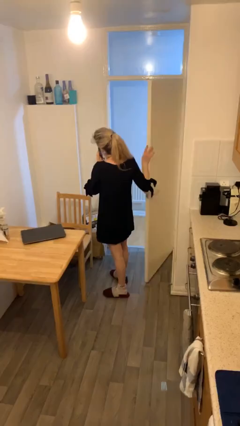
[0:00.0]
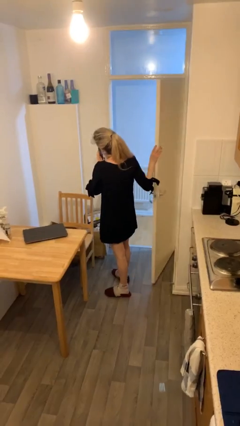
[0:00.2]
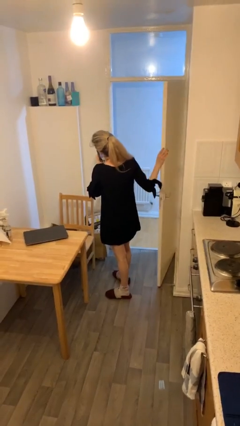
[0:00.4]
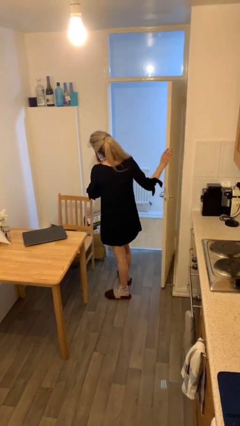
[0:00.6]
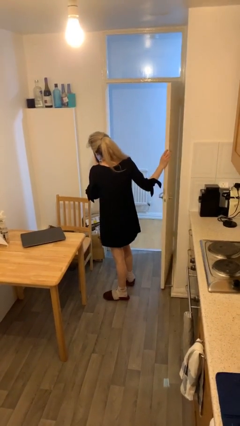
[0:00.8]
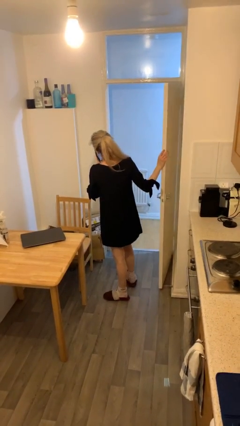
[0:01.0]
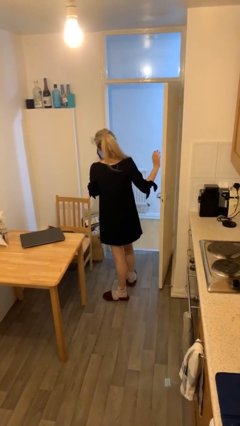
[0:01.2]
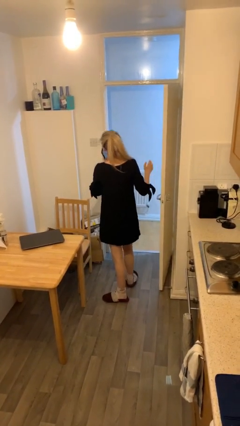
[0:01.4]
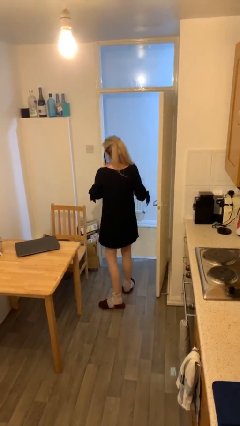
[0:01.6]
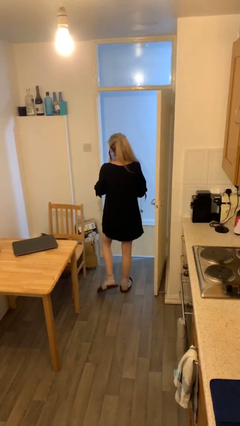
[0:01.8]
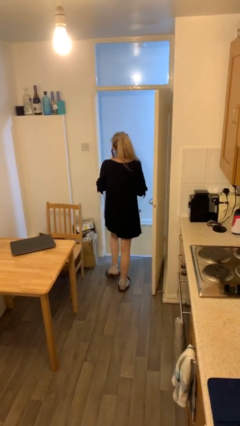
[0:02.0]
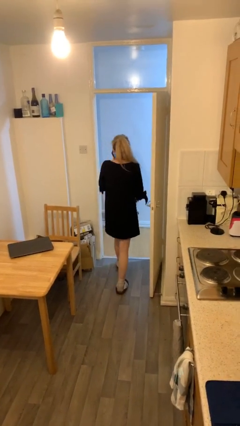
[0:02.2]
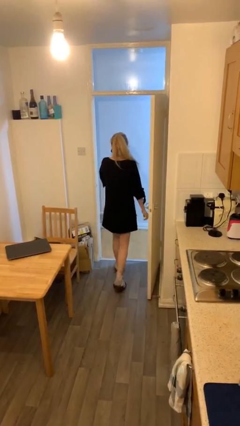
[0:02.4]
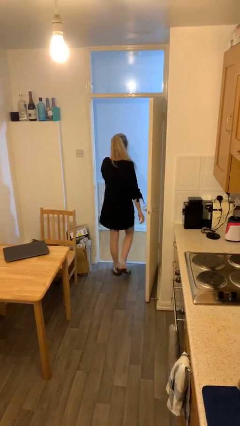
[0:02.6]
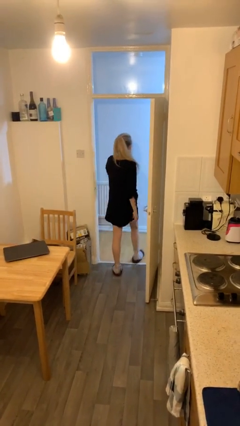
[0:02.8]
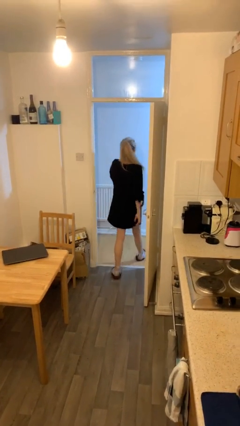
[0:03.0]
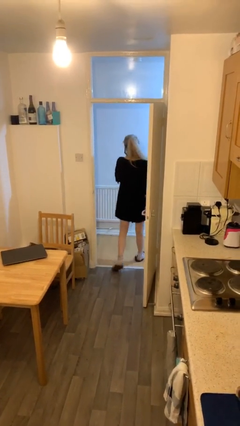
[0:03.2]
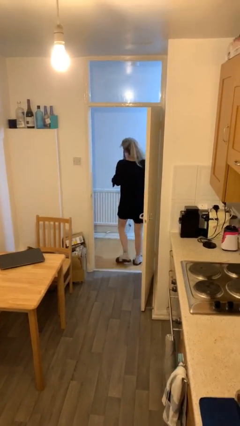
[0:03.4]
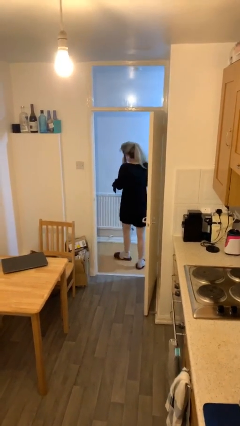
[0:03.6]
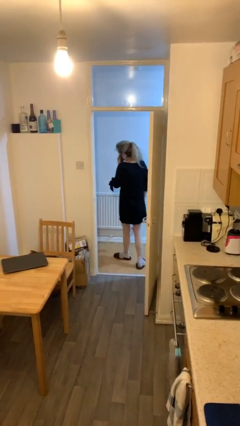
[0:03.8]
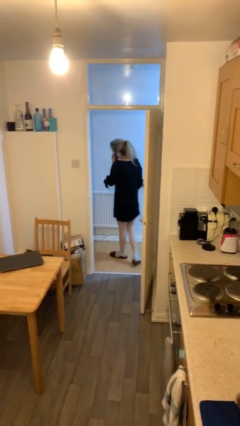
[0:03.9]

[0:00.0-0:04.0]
person exits scene through structure

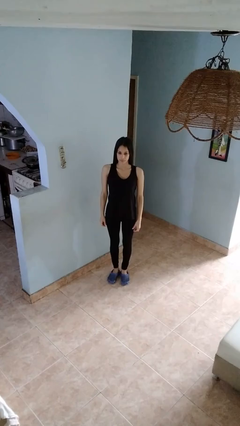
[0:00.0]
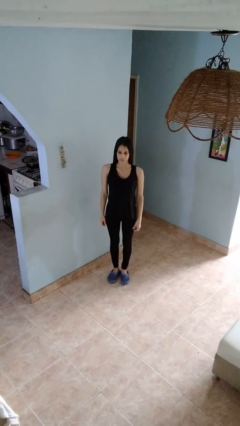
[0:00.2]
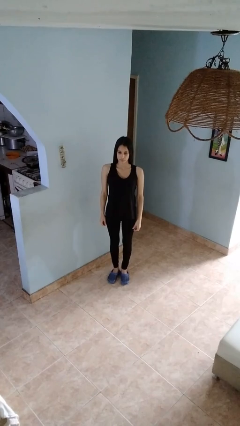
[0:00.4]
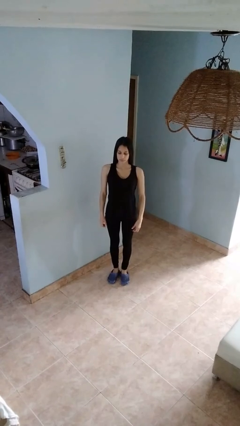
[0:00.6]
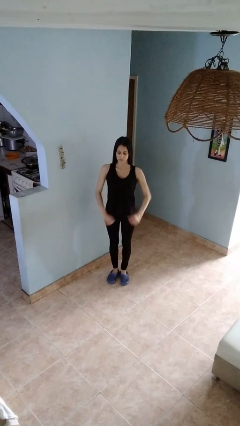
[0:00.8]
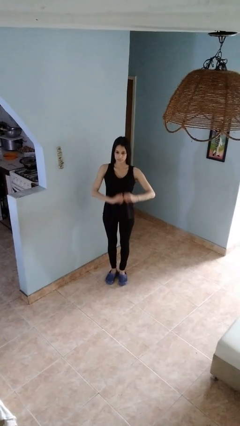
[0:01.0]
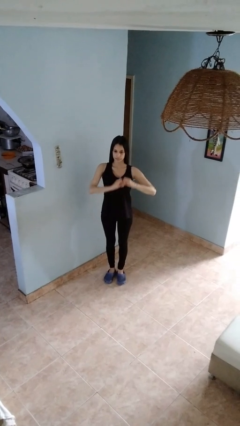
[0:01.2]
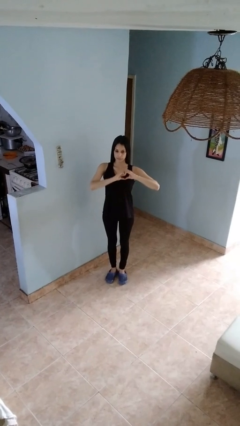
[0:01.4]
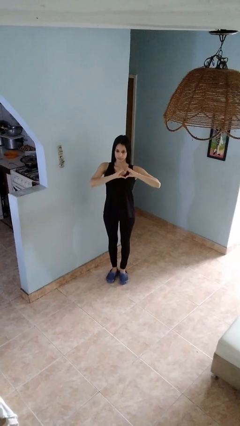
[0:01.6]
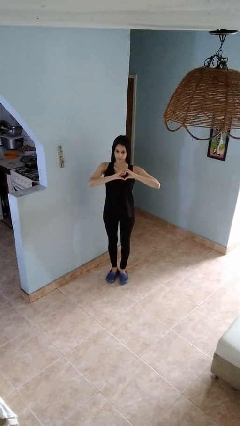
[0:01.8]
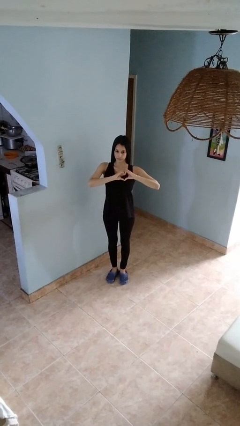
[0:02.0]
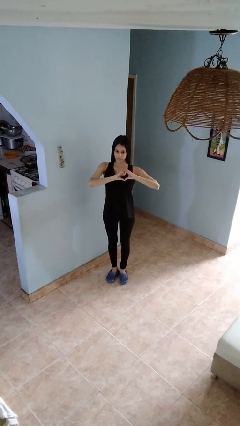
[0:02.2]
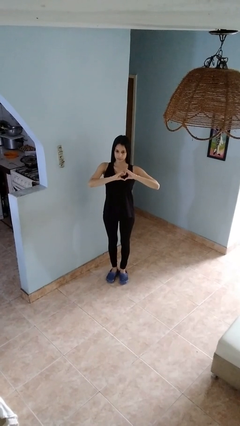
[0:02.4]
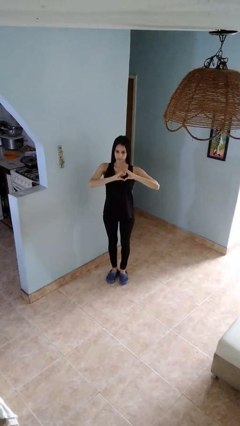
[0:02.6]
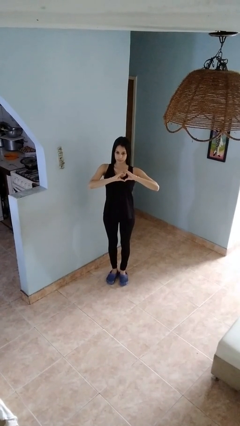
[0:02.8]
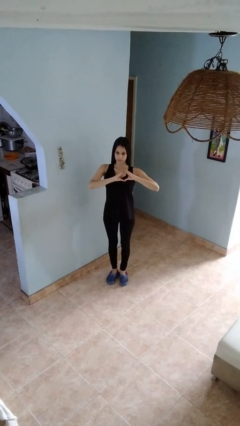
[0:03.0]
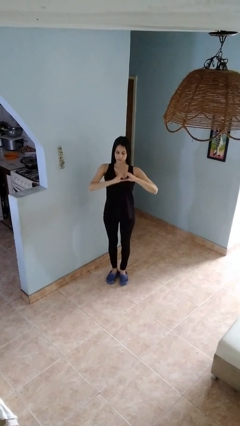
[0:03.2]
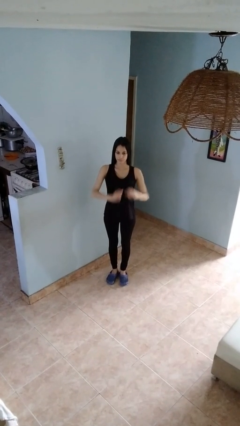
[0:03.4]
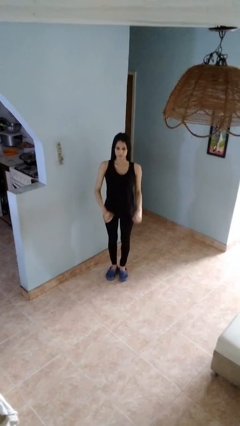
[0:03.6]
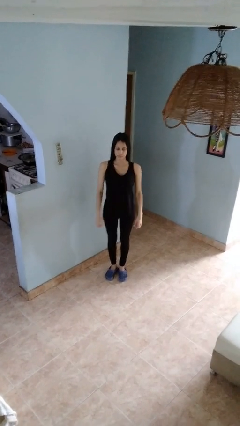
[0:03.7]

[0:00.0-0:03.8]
person gestures heart

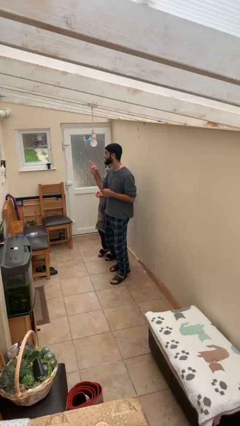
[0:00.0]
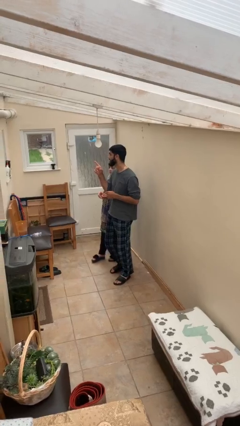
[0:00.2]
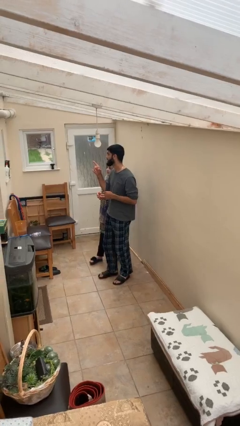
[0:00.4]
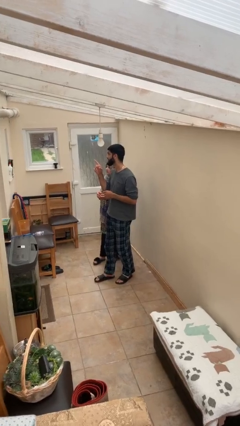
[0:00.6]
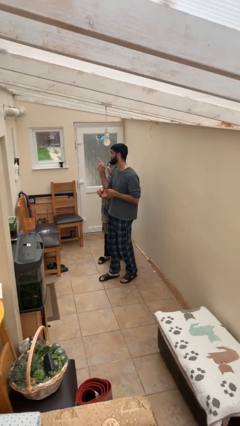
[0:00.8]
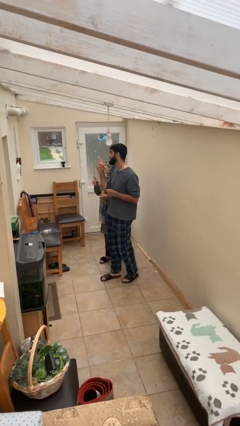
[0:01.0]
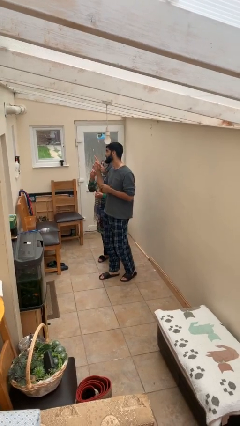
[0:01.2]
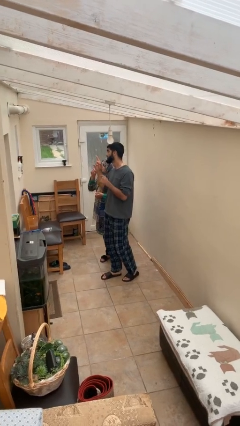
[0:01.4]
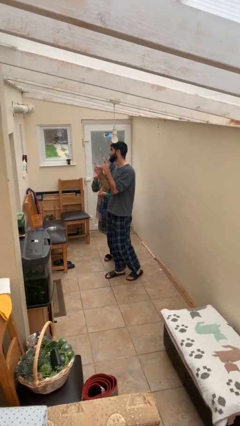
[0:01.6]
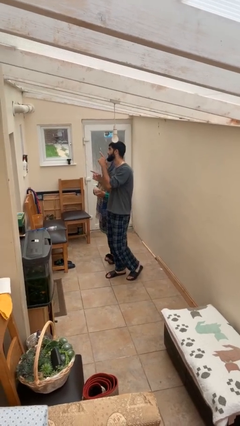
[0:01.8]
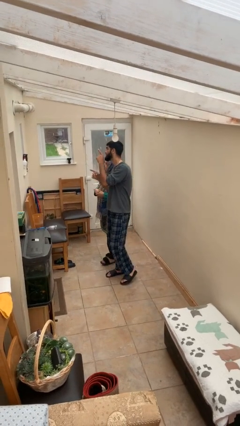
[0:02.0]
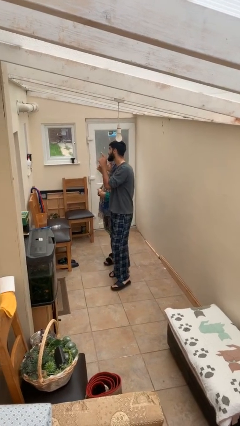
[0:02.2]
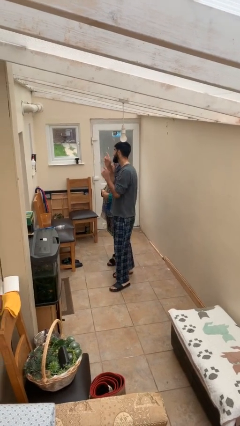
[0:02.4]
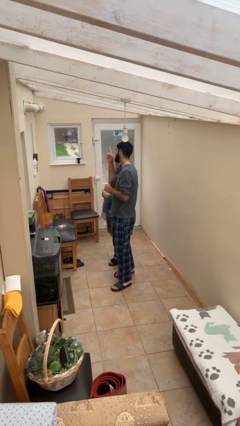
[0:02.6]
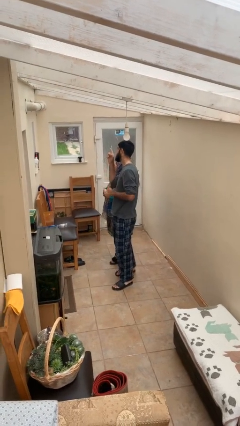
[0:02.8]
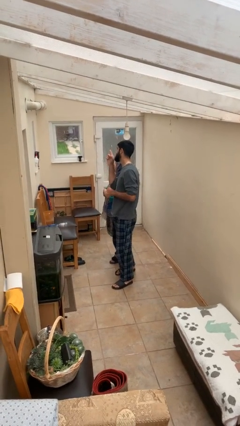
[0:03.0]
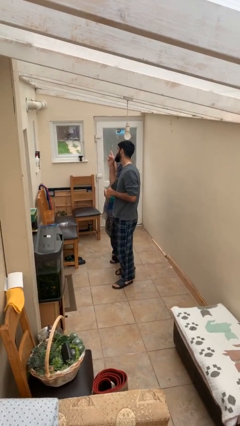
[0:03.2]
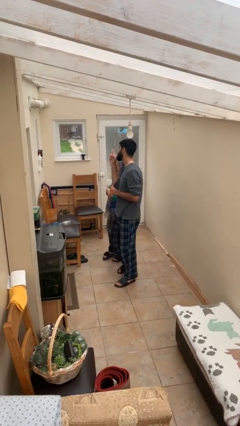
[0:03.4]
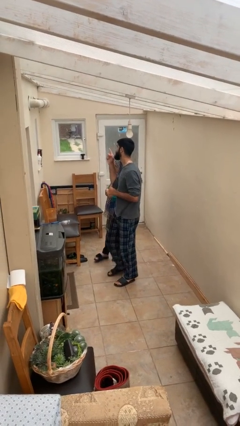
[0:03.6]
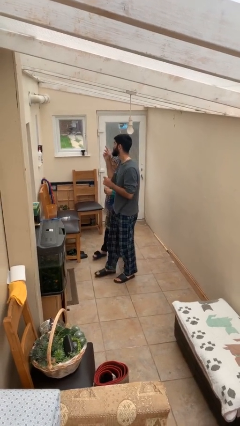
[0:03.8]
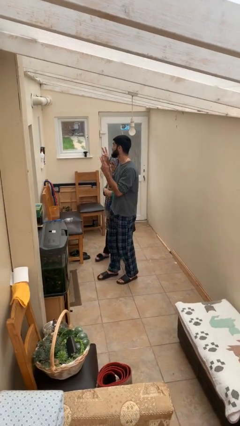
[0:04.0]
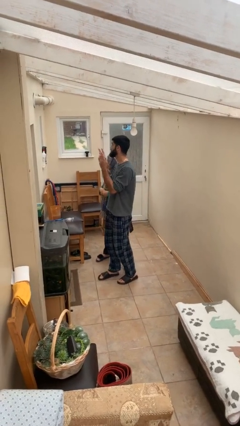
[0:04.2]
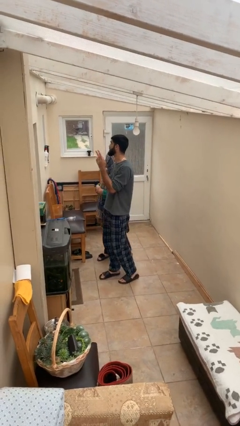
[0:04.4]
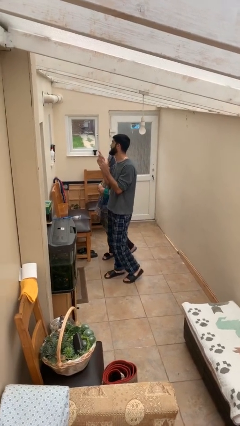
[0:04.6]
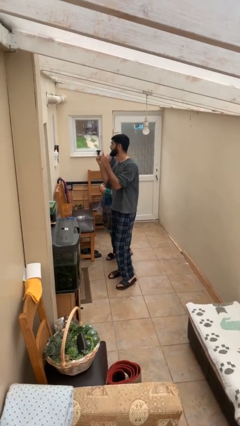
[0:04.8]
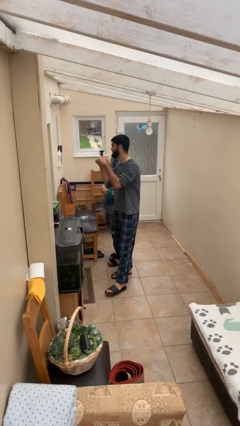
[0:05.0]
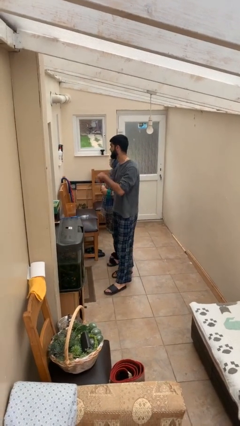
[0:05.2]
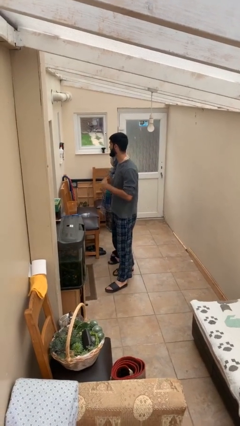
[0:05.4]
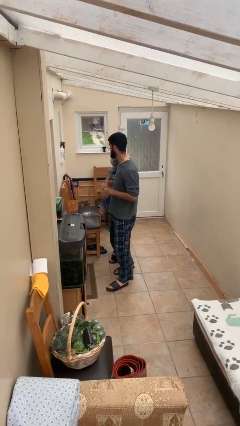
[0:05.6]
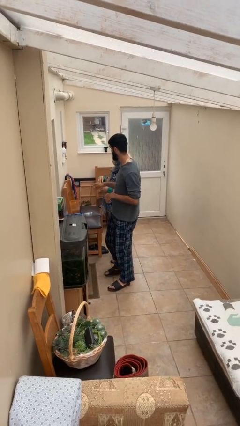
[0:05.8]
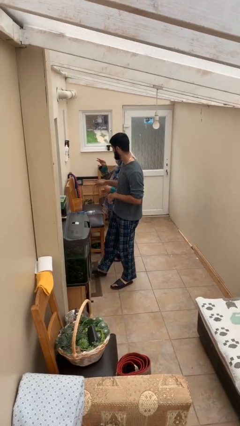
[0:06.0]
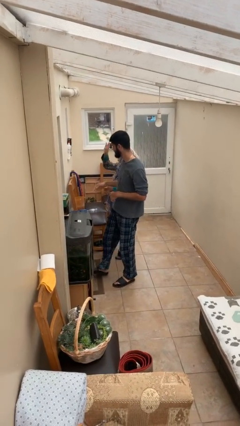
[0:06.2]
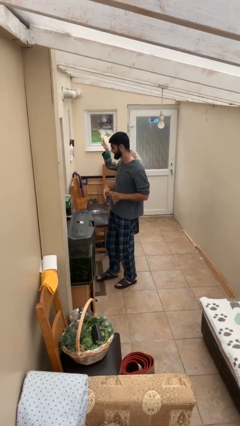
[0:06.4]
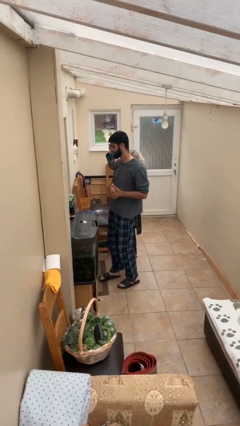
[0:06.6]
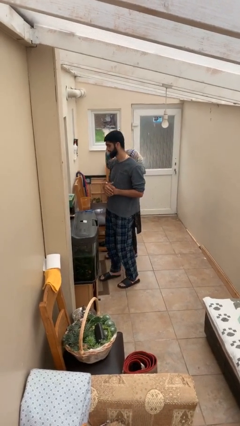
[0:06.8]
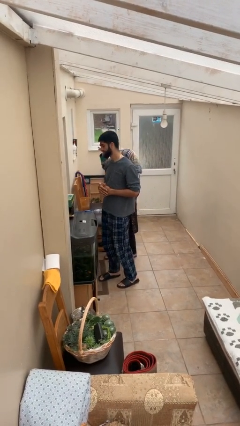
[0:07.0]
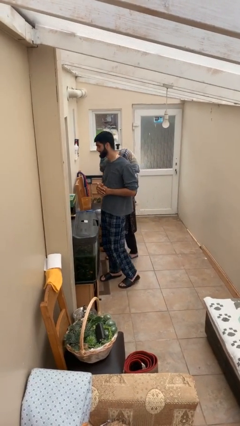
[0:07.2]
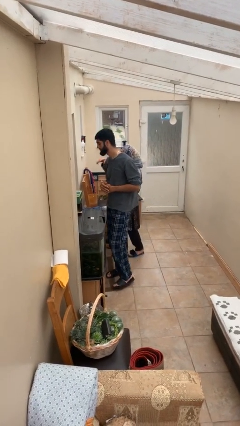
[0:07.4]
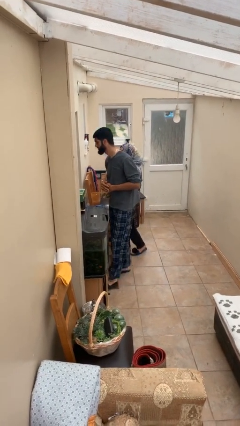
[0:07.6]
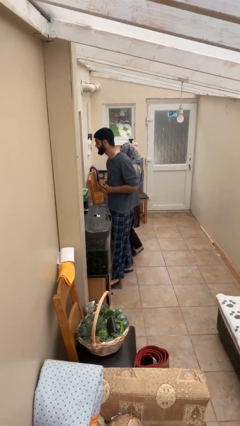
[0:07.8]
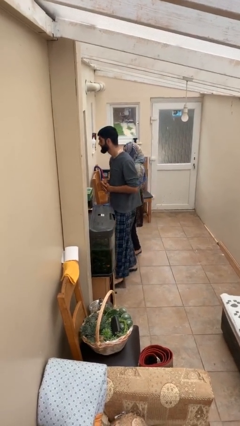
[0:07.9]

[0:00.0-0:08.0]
person talks to person

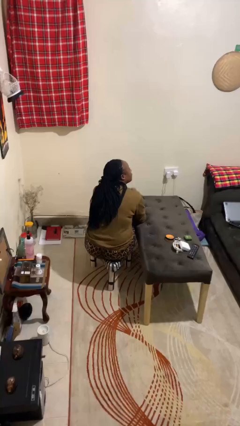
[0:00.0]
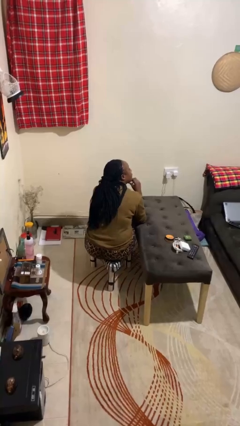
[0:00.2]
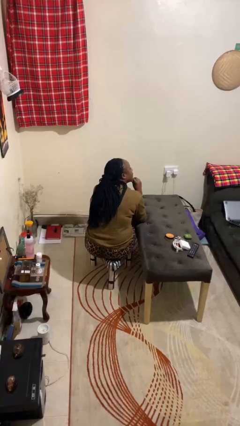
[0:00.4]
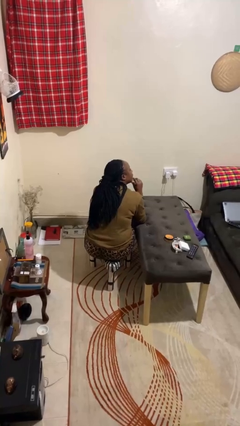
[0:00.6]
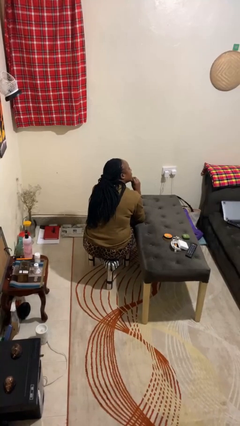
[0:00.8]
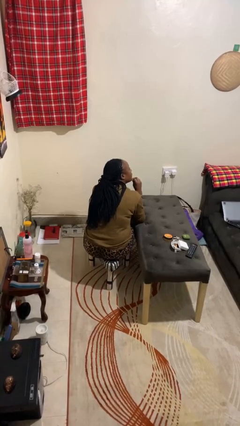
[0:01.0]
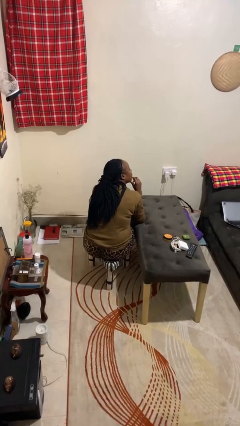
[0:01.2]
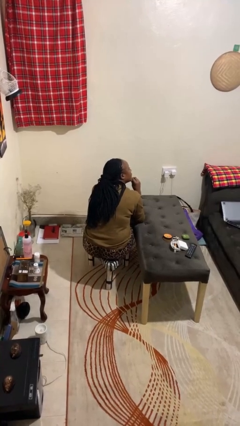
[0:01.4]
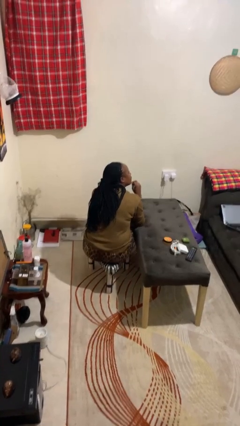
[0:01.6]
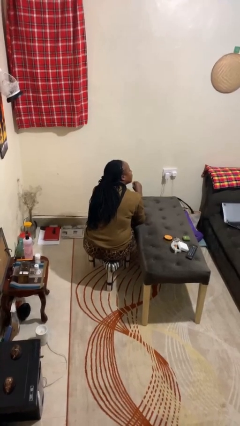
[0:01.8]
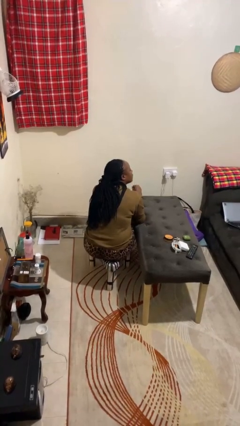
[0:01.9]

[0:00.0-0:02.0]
person strokes chin
